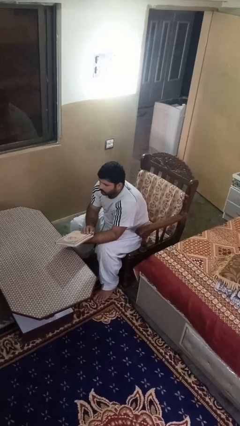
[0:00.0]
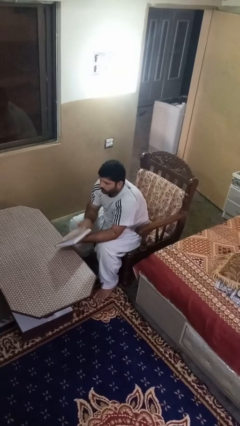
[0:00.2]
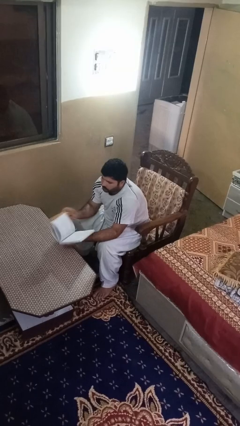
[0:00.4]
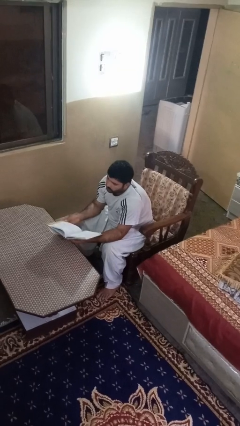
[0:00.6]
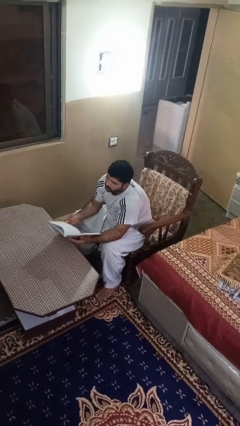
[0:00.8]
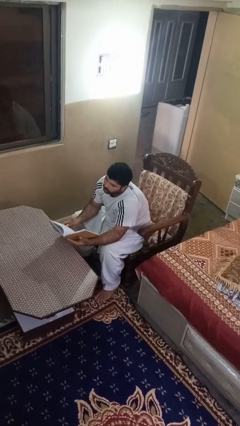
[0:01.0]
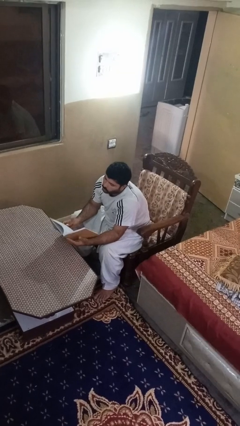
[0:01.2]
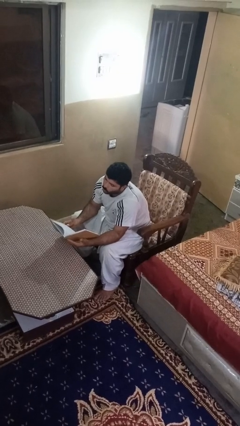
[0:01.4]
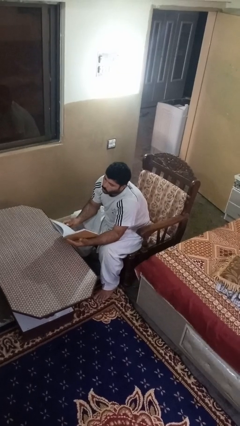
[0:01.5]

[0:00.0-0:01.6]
person reads book

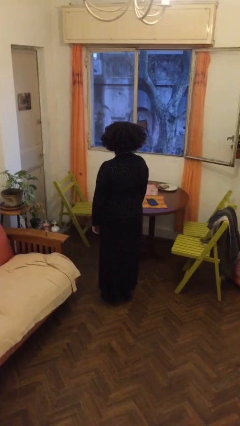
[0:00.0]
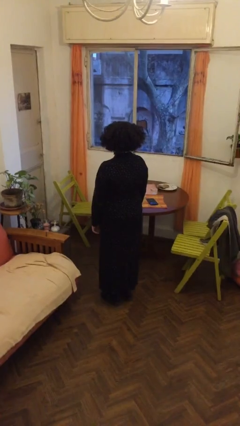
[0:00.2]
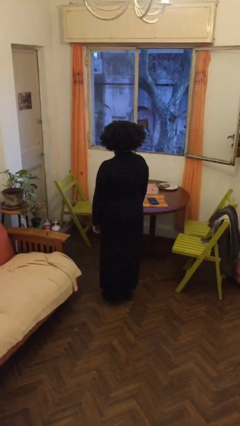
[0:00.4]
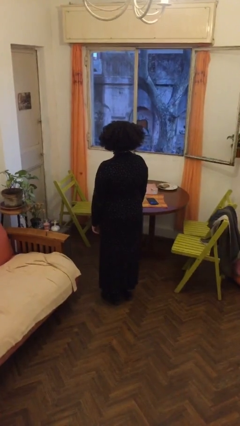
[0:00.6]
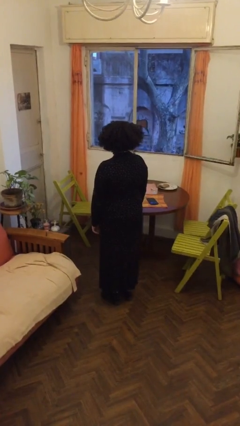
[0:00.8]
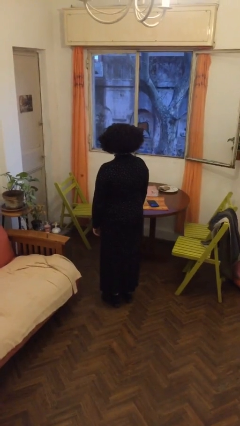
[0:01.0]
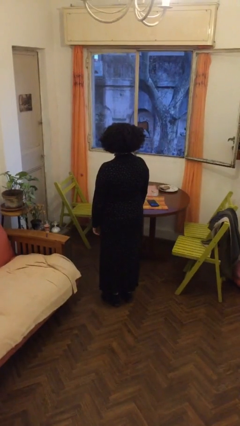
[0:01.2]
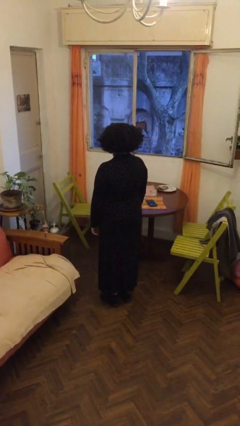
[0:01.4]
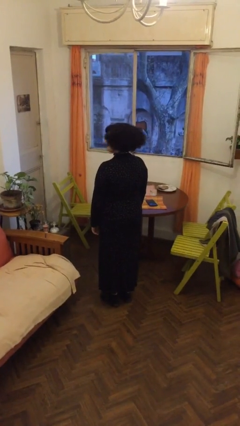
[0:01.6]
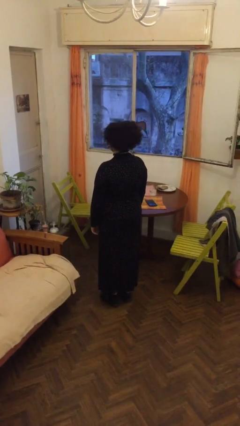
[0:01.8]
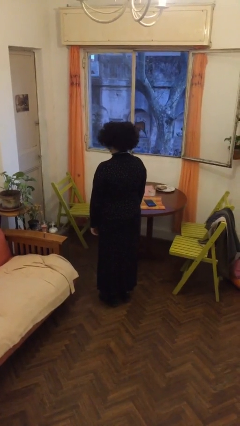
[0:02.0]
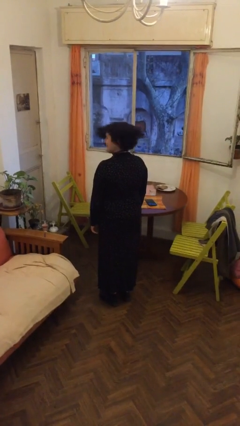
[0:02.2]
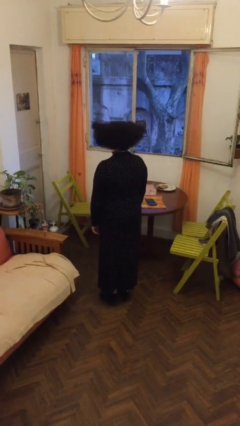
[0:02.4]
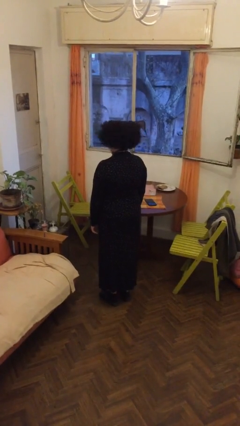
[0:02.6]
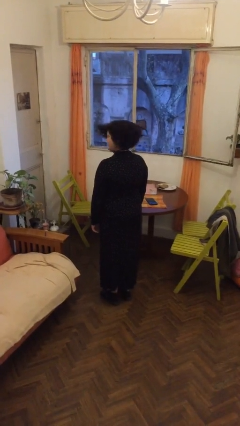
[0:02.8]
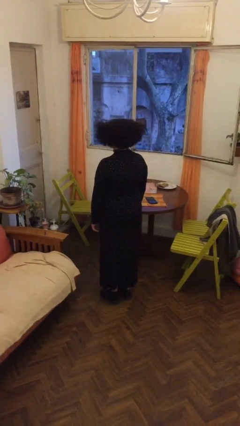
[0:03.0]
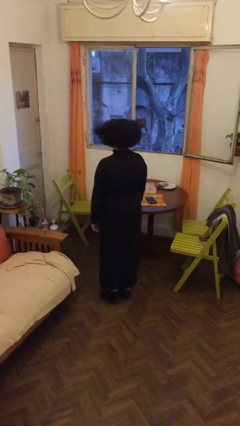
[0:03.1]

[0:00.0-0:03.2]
person shakes head

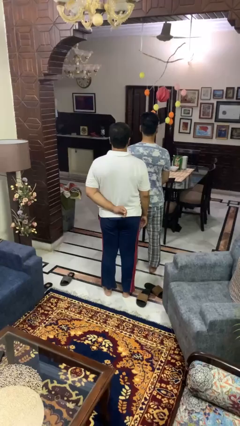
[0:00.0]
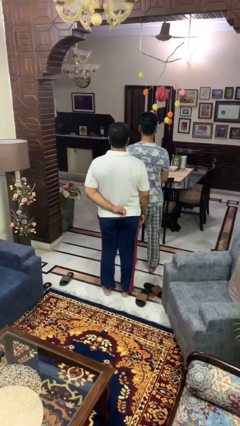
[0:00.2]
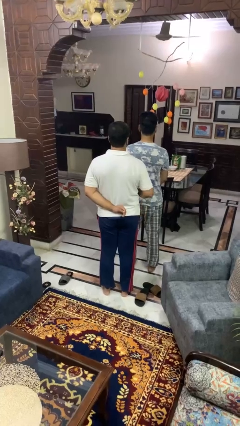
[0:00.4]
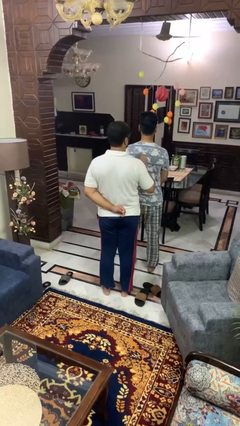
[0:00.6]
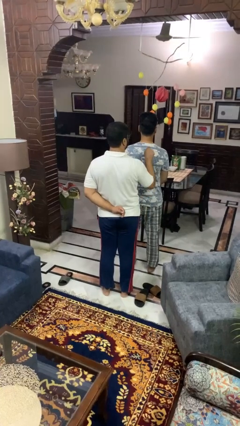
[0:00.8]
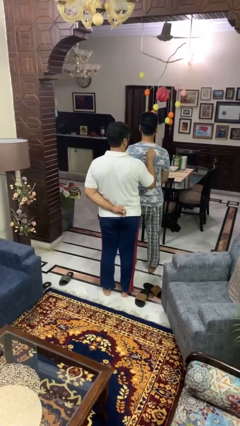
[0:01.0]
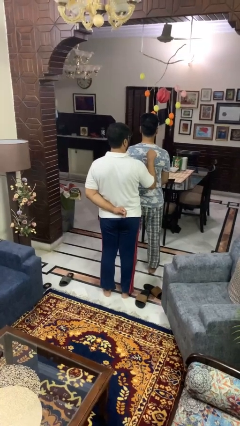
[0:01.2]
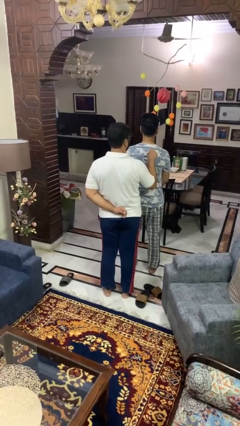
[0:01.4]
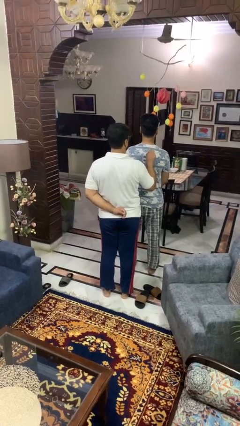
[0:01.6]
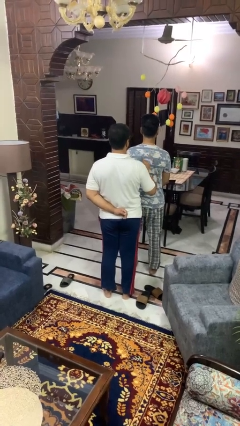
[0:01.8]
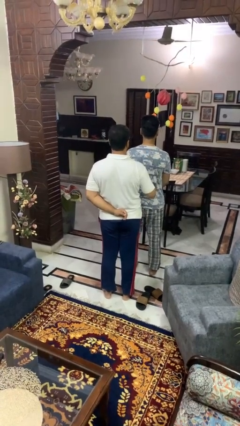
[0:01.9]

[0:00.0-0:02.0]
person touches back of person

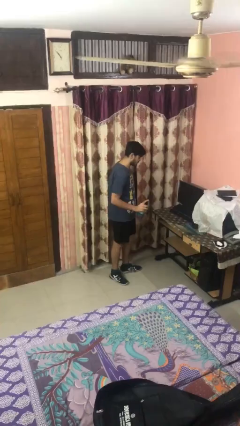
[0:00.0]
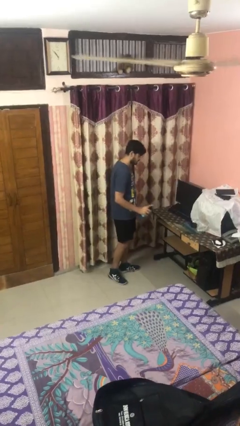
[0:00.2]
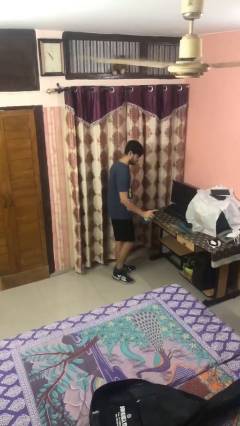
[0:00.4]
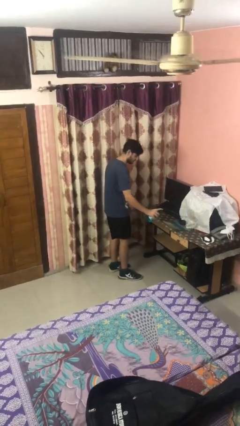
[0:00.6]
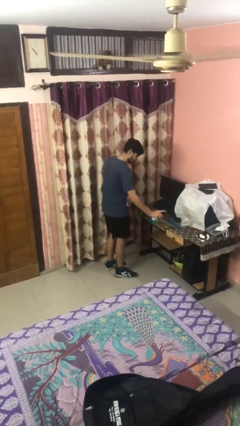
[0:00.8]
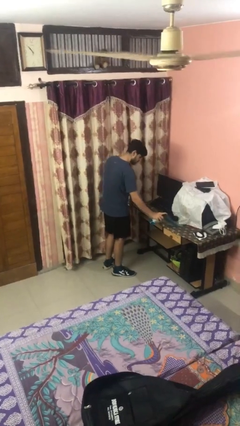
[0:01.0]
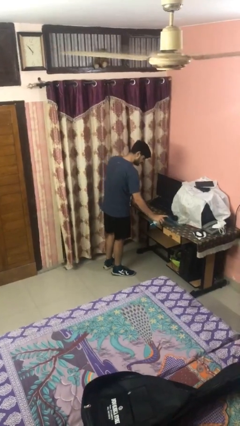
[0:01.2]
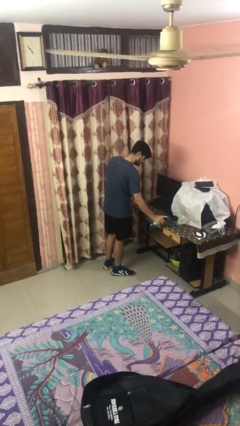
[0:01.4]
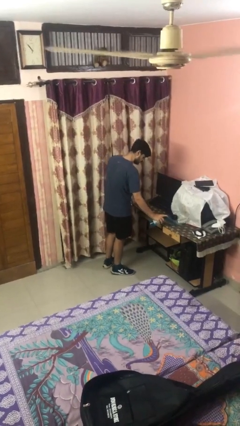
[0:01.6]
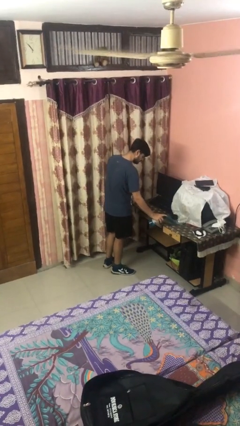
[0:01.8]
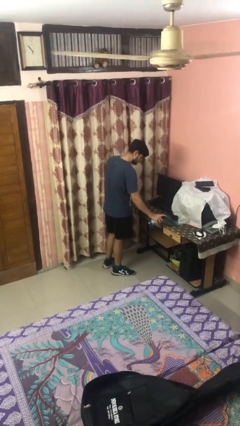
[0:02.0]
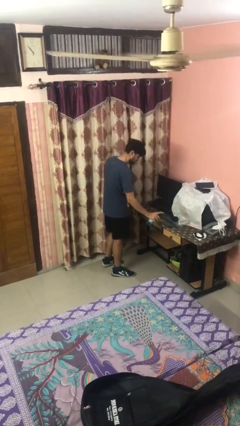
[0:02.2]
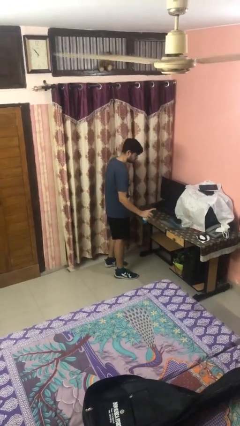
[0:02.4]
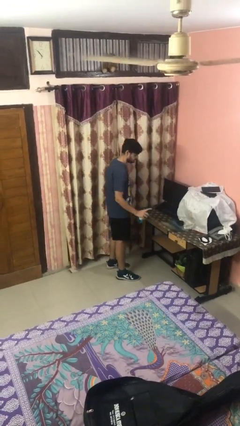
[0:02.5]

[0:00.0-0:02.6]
person sprays from bottle

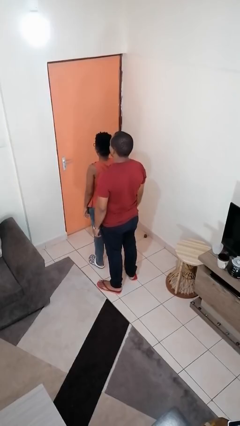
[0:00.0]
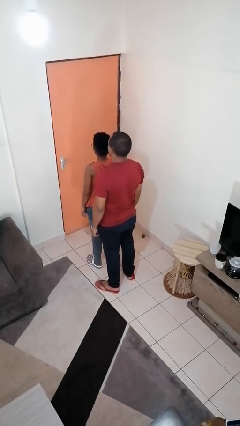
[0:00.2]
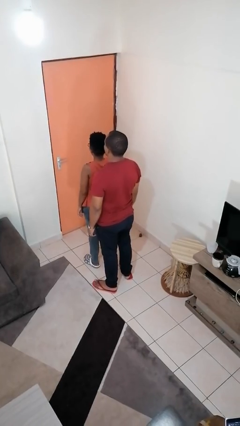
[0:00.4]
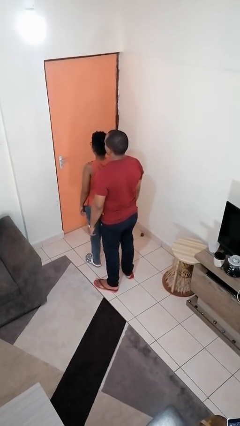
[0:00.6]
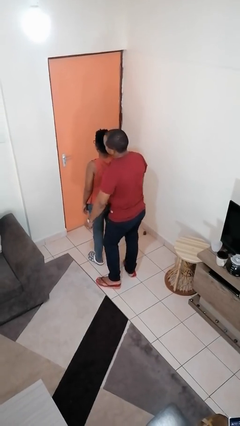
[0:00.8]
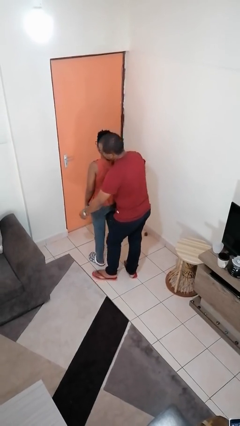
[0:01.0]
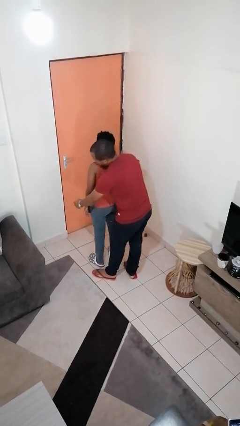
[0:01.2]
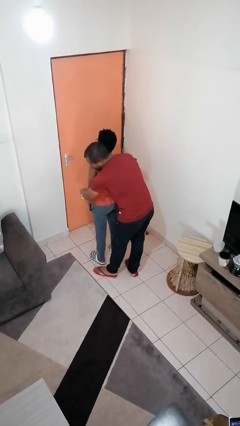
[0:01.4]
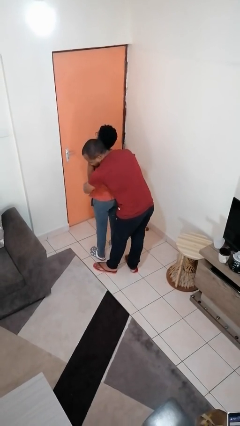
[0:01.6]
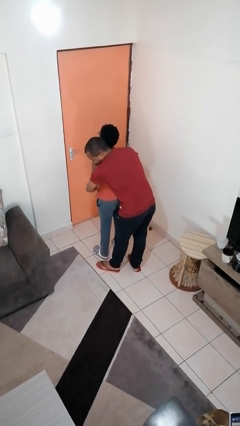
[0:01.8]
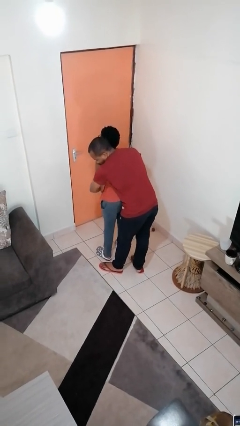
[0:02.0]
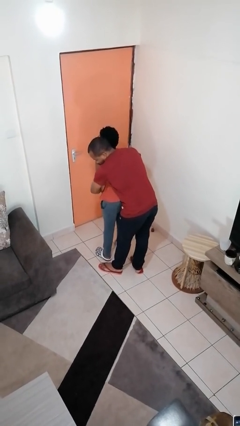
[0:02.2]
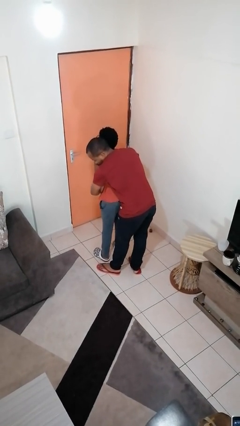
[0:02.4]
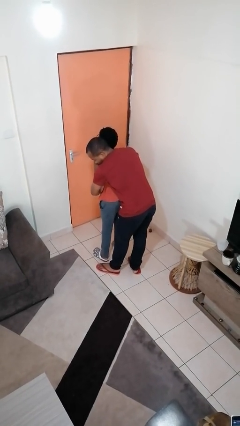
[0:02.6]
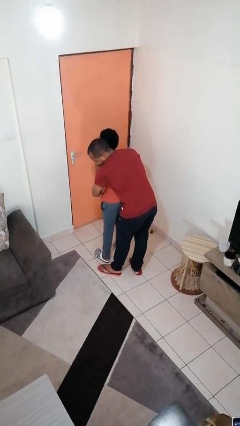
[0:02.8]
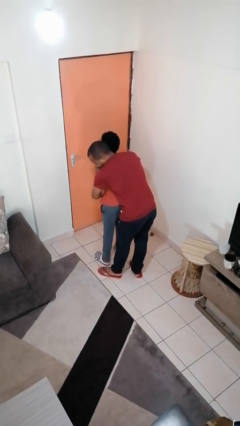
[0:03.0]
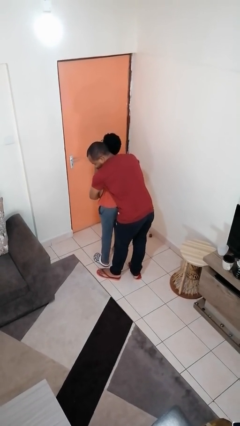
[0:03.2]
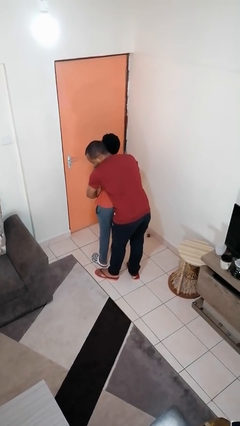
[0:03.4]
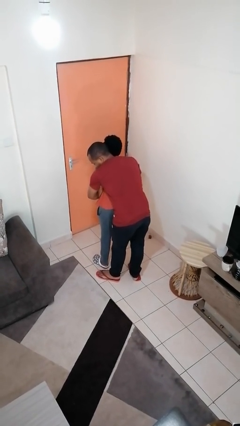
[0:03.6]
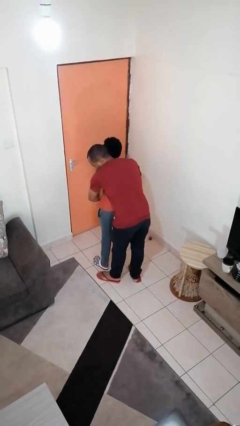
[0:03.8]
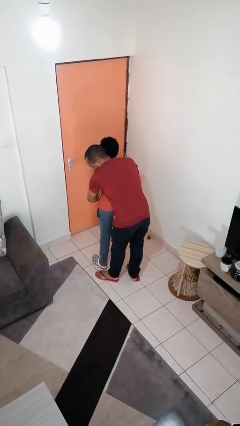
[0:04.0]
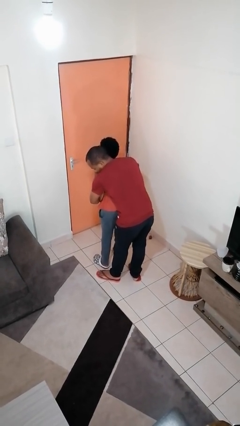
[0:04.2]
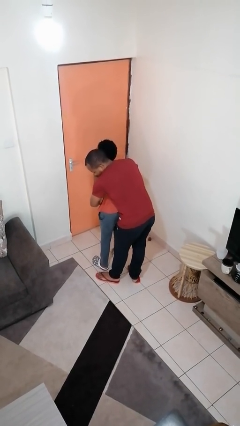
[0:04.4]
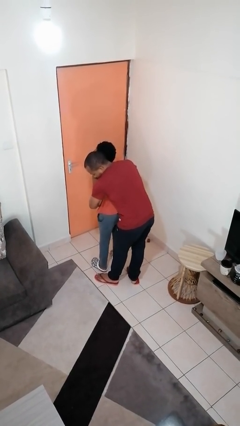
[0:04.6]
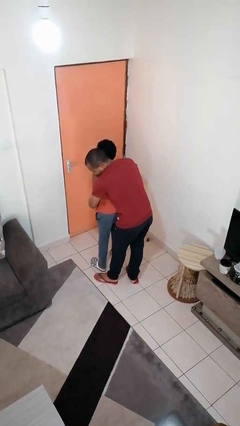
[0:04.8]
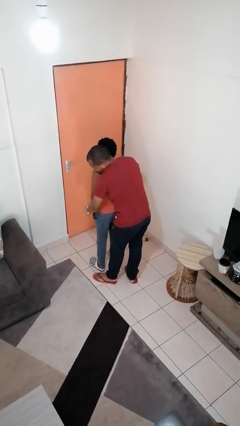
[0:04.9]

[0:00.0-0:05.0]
person hugs person from behind

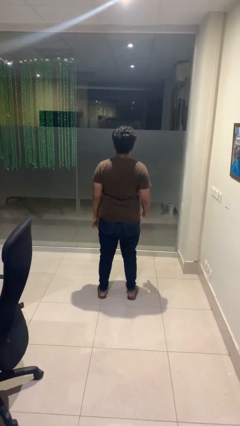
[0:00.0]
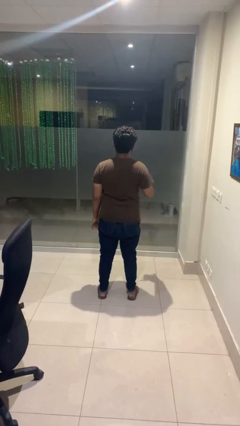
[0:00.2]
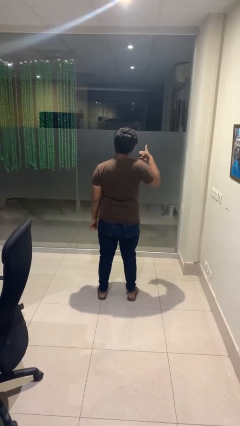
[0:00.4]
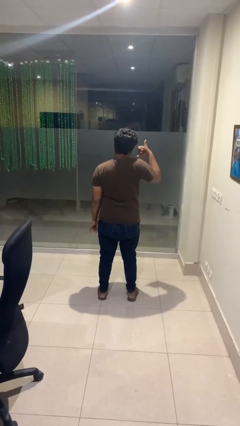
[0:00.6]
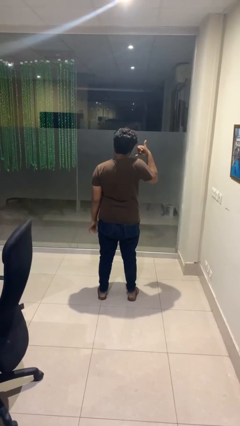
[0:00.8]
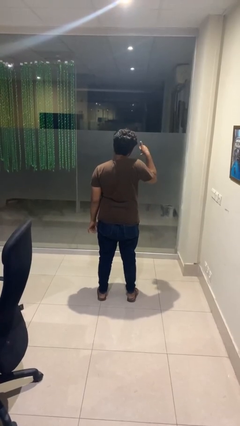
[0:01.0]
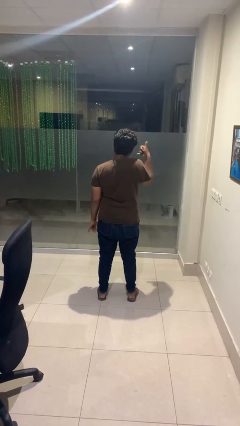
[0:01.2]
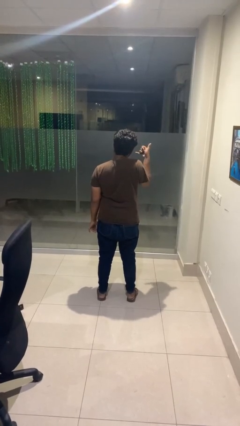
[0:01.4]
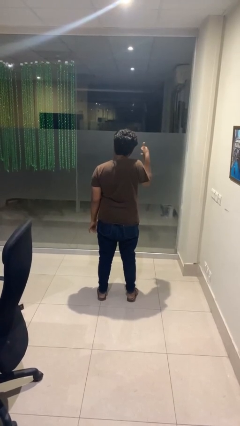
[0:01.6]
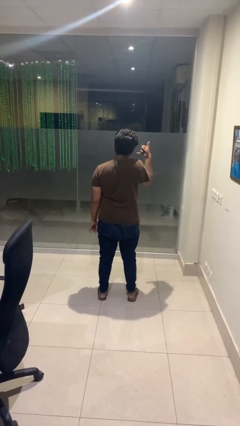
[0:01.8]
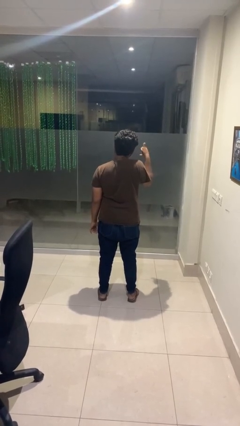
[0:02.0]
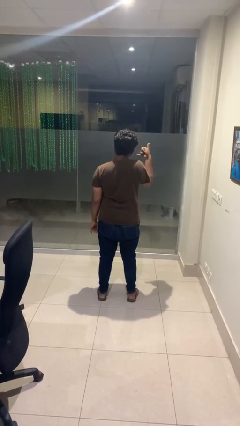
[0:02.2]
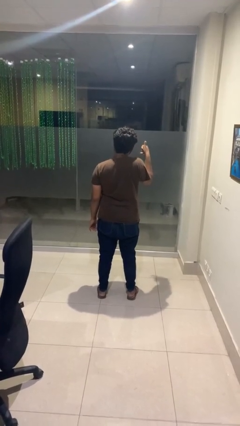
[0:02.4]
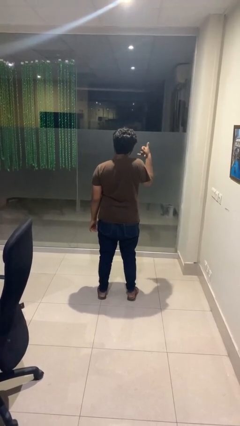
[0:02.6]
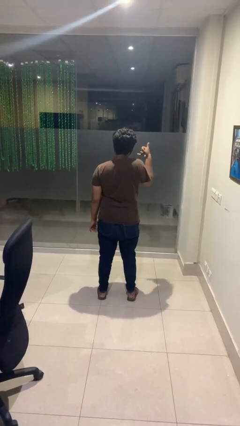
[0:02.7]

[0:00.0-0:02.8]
person gestures hang loose
